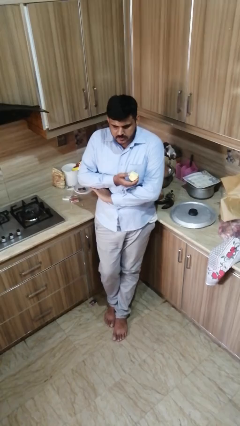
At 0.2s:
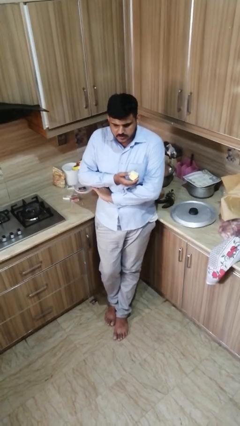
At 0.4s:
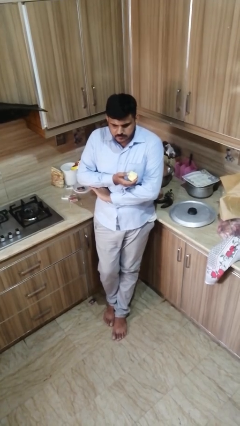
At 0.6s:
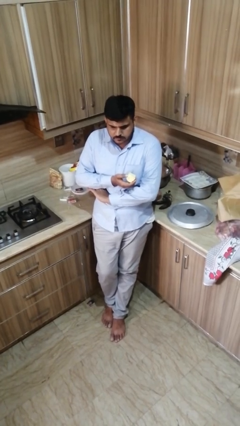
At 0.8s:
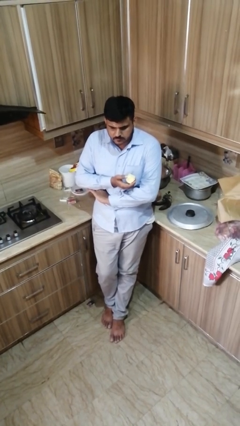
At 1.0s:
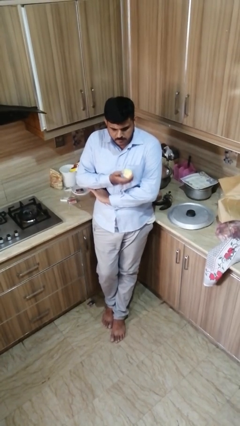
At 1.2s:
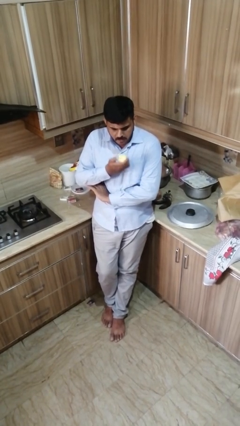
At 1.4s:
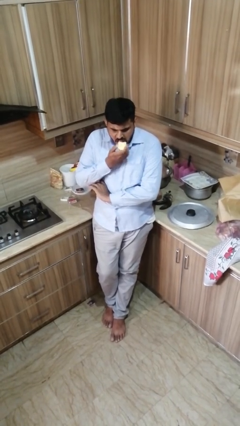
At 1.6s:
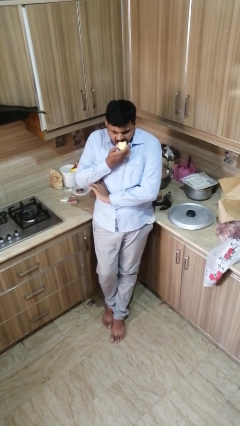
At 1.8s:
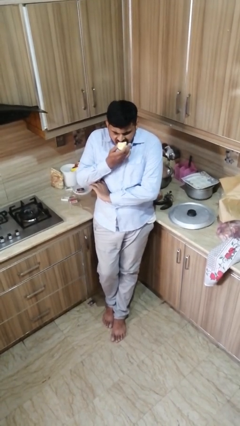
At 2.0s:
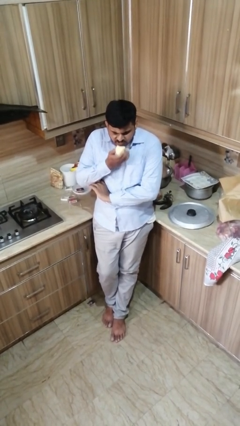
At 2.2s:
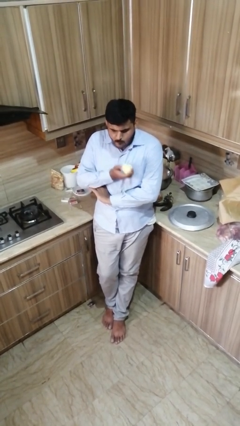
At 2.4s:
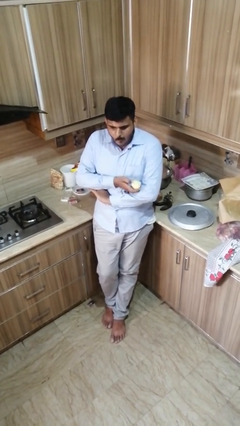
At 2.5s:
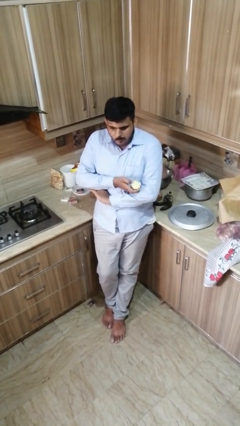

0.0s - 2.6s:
person eats apple

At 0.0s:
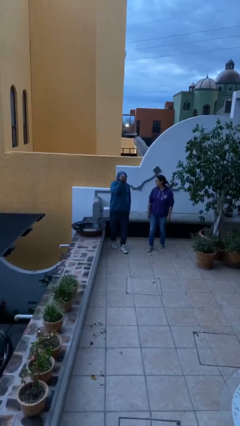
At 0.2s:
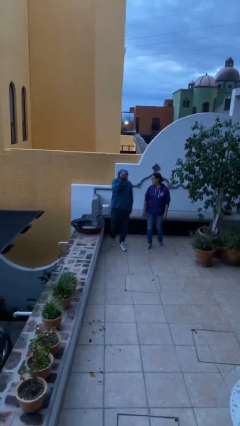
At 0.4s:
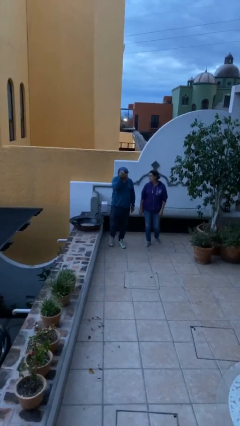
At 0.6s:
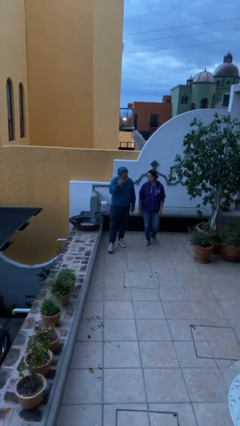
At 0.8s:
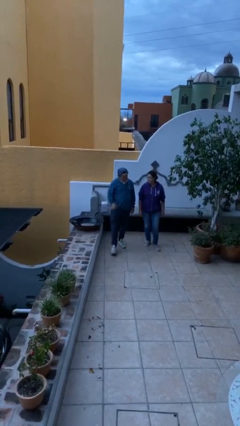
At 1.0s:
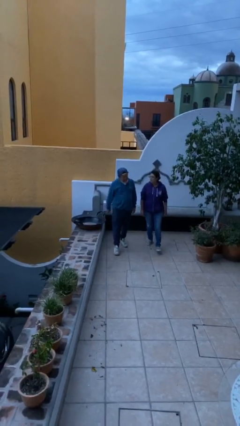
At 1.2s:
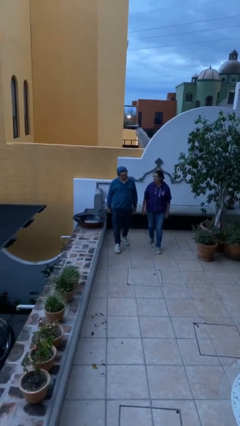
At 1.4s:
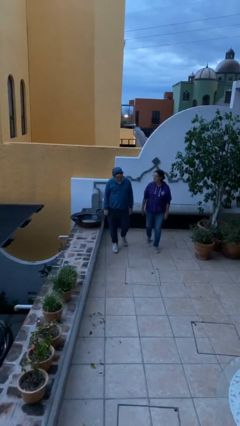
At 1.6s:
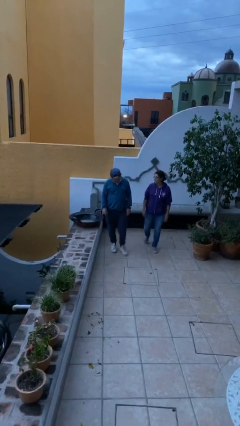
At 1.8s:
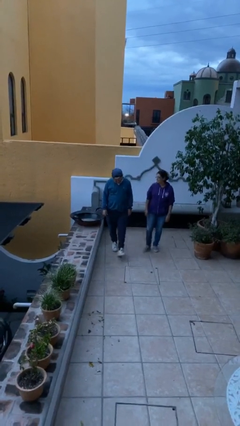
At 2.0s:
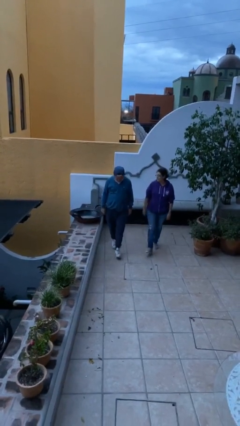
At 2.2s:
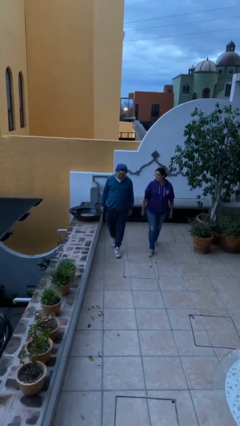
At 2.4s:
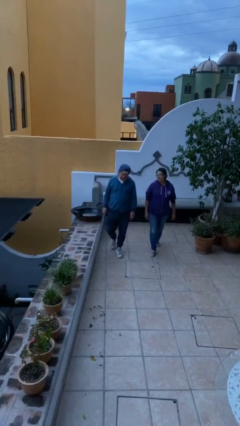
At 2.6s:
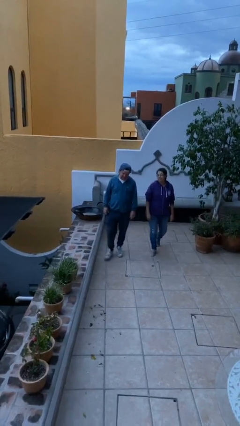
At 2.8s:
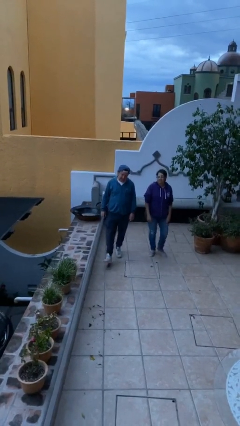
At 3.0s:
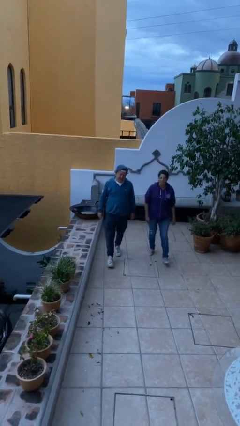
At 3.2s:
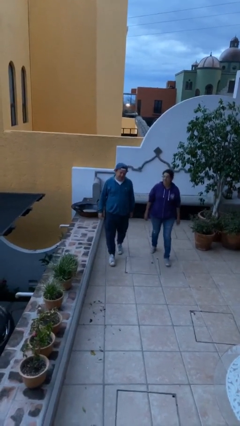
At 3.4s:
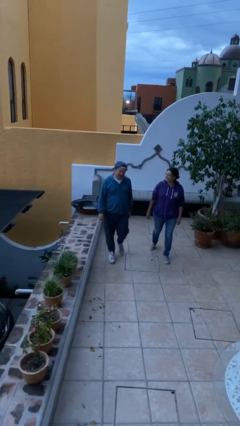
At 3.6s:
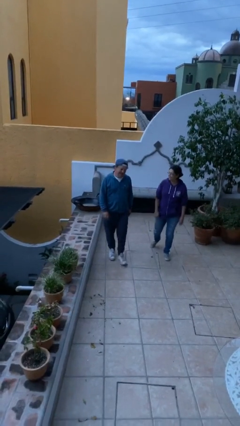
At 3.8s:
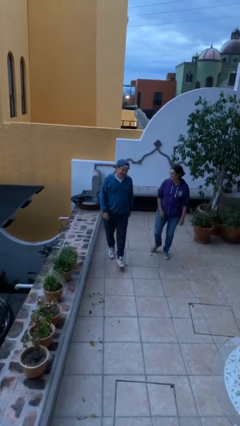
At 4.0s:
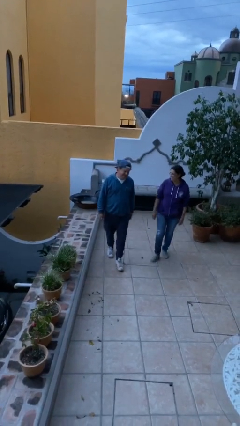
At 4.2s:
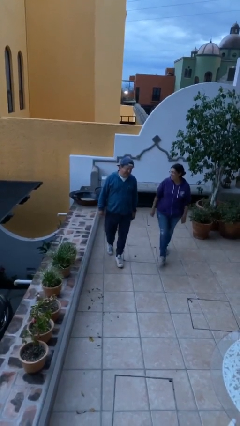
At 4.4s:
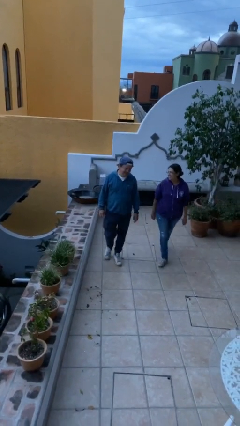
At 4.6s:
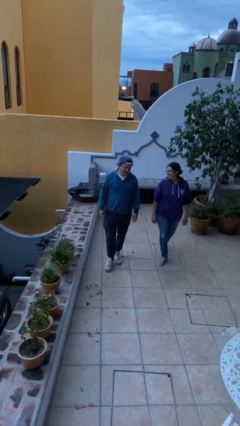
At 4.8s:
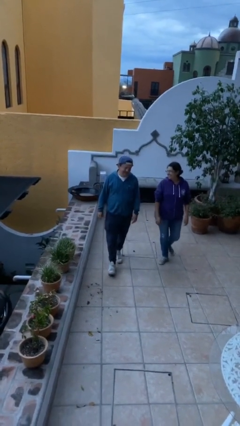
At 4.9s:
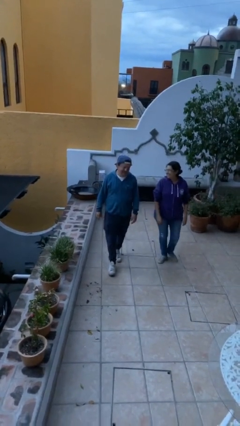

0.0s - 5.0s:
person talks to person

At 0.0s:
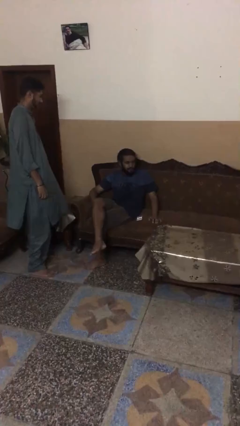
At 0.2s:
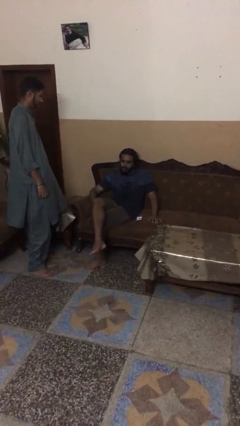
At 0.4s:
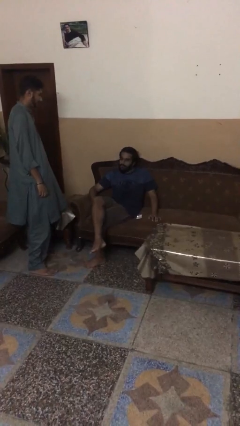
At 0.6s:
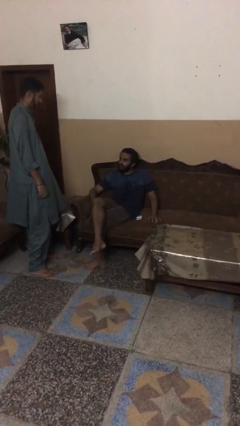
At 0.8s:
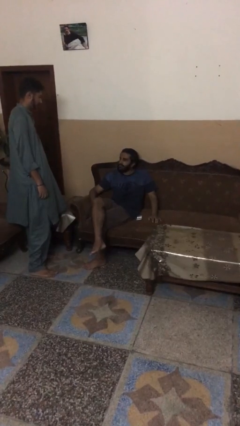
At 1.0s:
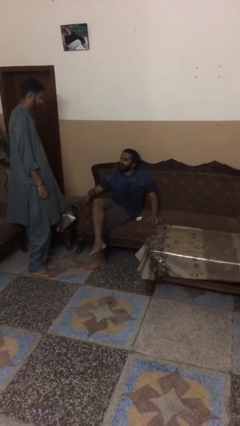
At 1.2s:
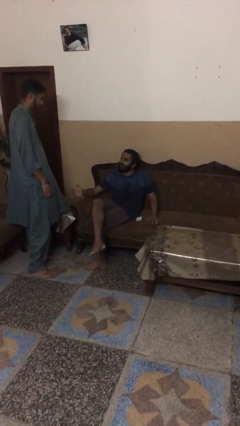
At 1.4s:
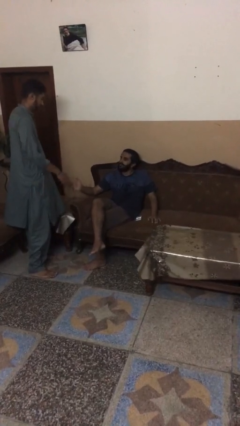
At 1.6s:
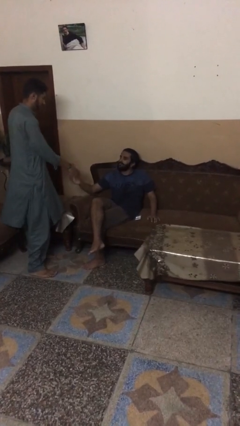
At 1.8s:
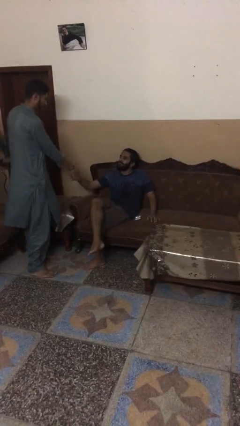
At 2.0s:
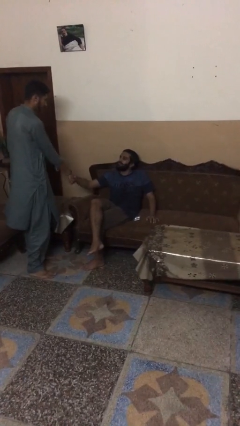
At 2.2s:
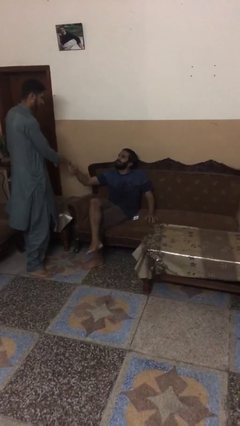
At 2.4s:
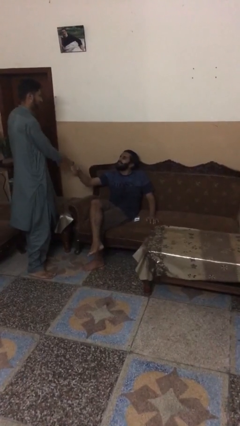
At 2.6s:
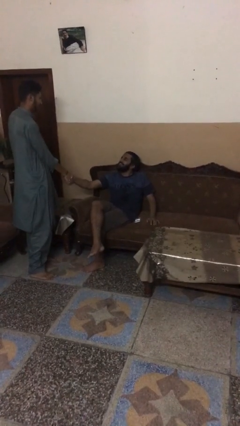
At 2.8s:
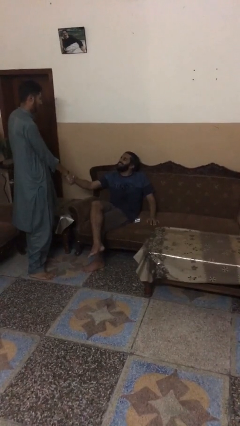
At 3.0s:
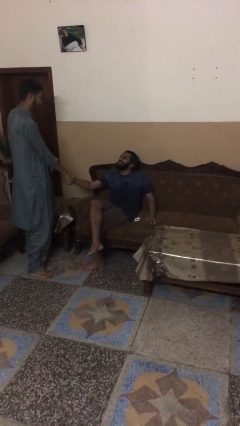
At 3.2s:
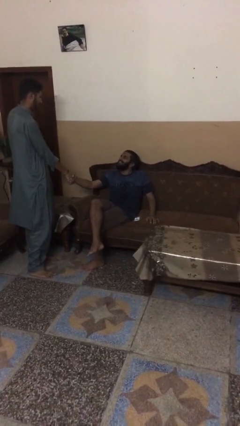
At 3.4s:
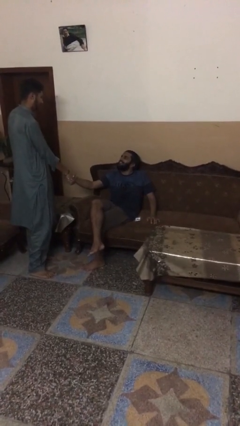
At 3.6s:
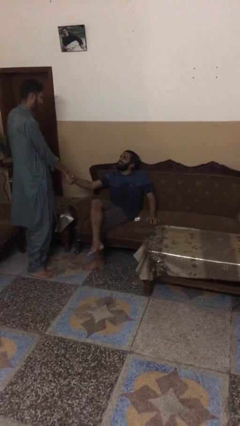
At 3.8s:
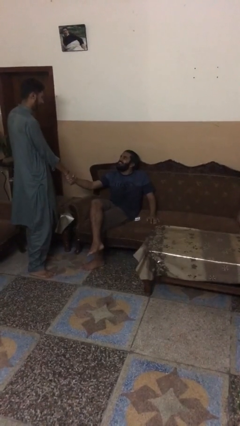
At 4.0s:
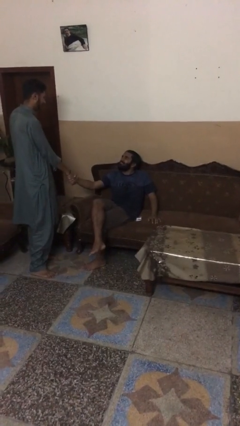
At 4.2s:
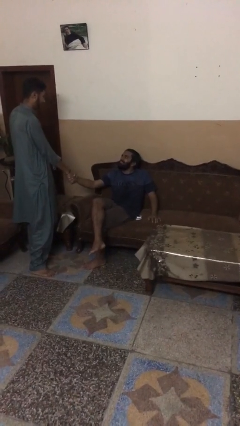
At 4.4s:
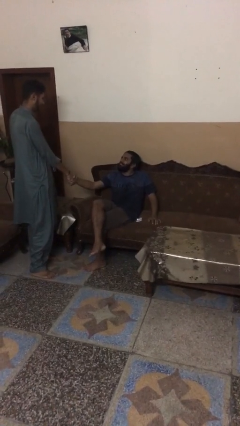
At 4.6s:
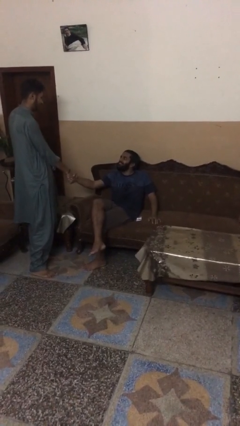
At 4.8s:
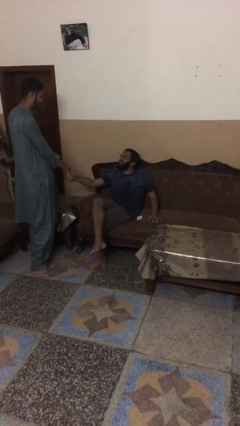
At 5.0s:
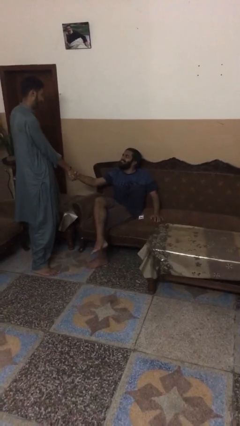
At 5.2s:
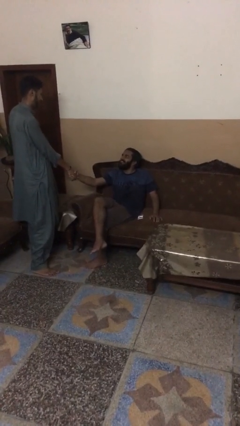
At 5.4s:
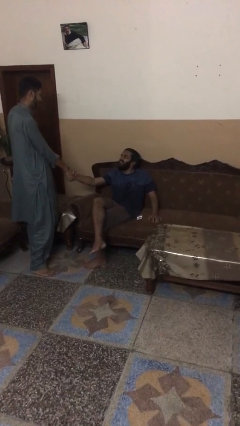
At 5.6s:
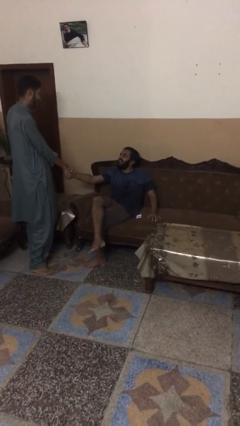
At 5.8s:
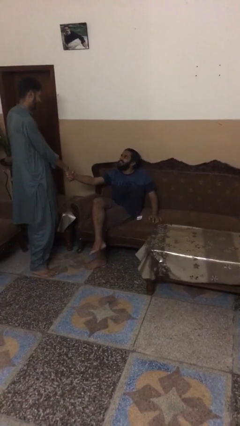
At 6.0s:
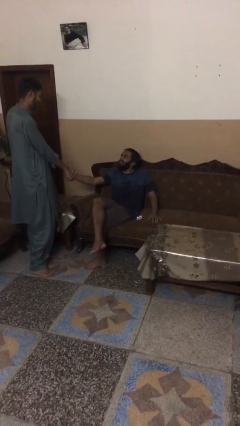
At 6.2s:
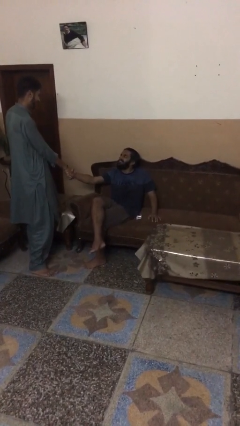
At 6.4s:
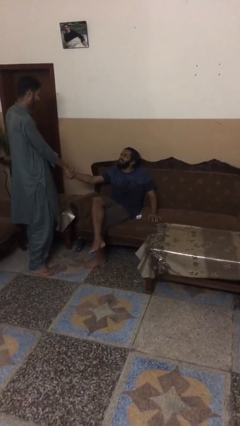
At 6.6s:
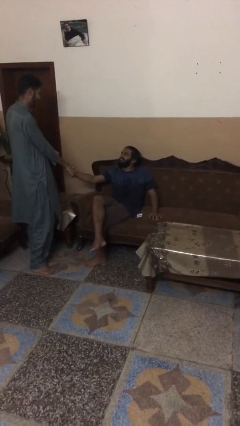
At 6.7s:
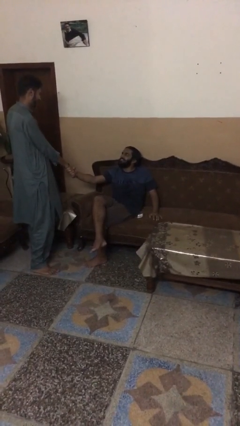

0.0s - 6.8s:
person shakes hand

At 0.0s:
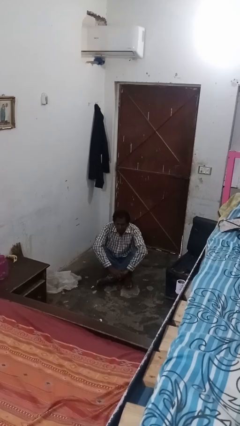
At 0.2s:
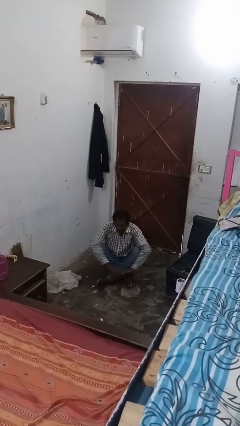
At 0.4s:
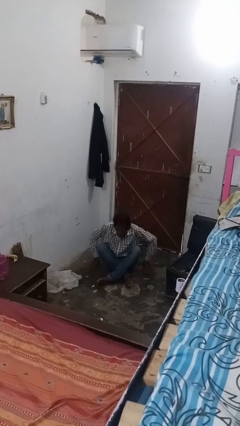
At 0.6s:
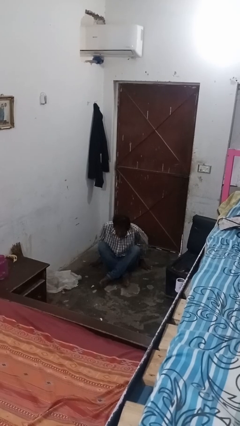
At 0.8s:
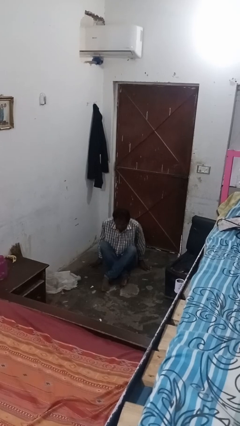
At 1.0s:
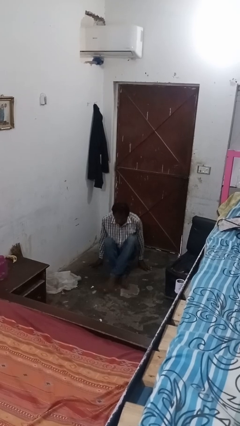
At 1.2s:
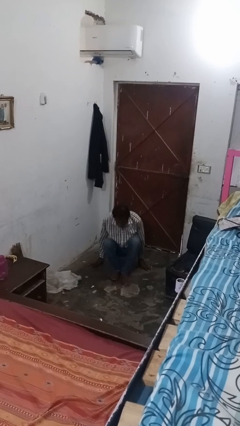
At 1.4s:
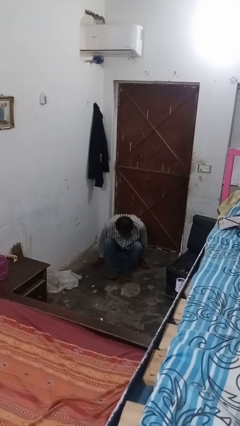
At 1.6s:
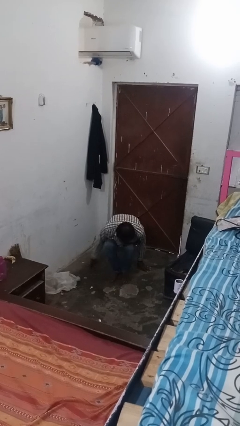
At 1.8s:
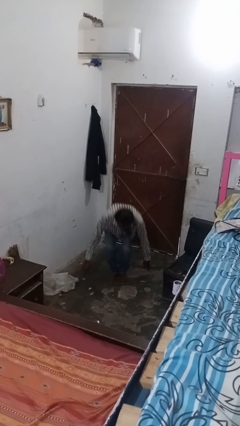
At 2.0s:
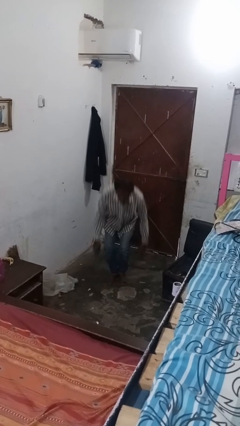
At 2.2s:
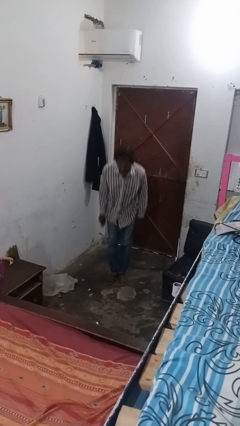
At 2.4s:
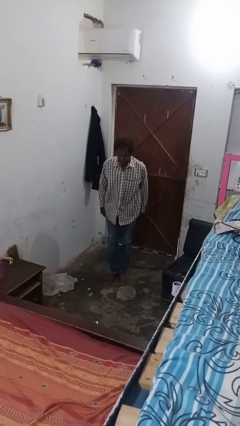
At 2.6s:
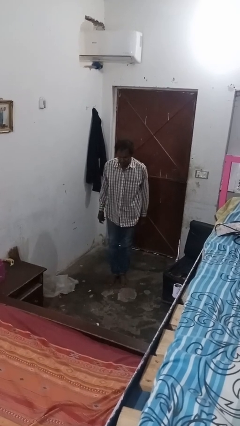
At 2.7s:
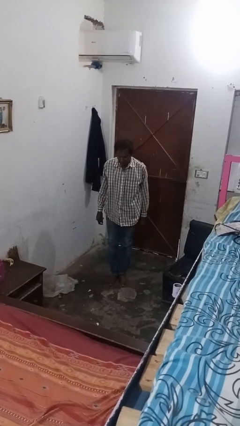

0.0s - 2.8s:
person stands up from floor

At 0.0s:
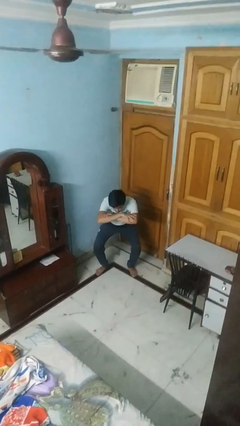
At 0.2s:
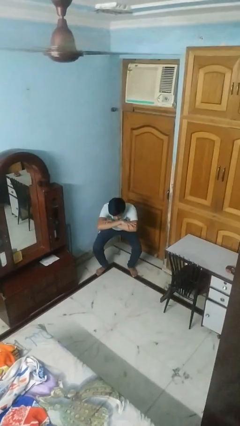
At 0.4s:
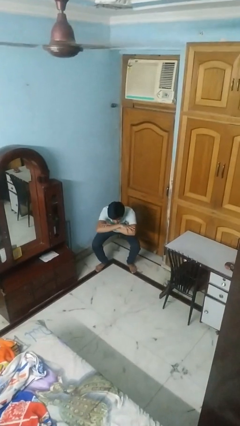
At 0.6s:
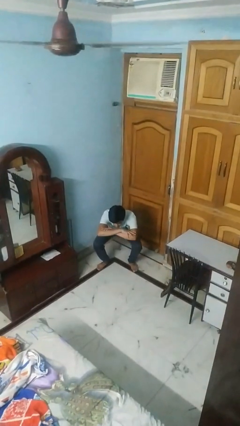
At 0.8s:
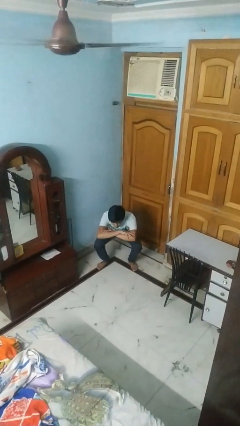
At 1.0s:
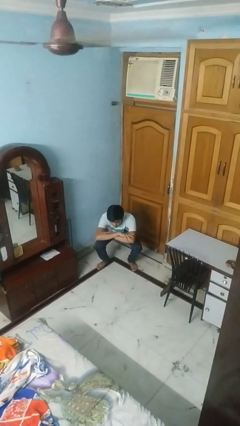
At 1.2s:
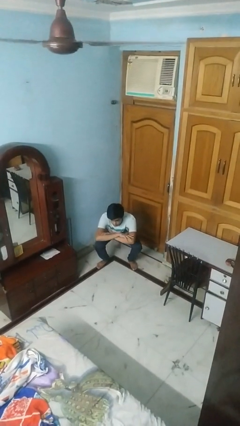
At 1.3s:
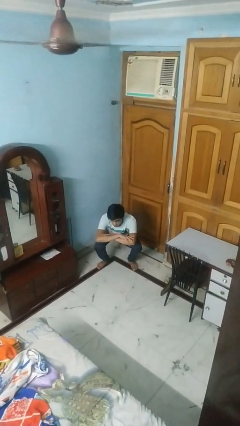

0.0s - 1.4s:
person squats
